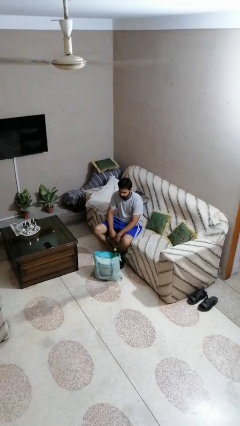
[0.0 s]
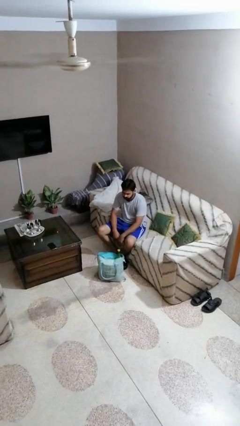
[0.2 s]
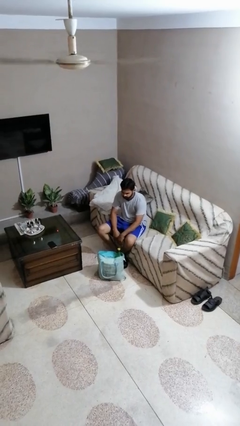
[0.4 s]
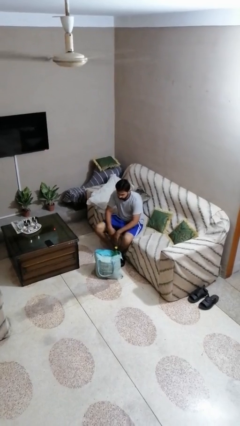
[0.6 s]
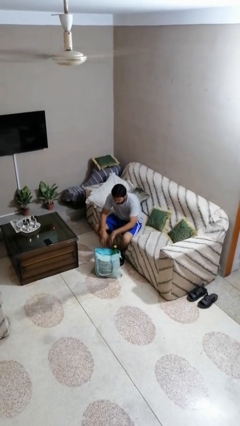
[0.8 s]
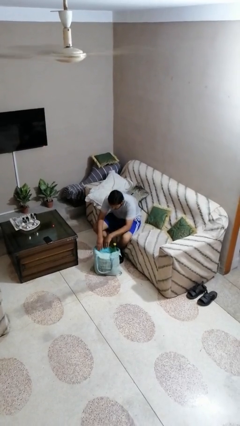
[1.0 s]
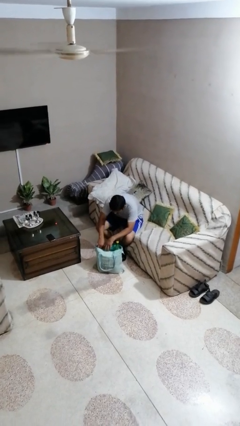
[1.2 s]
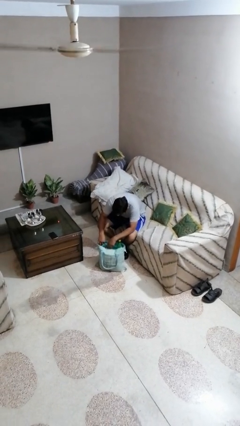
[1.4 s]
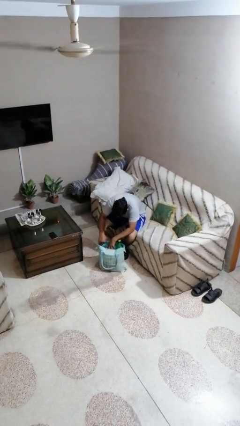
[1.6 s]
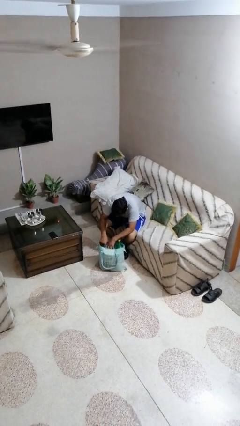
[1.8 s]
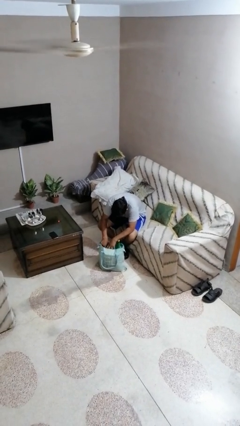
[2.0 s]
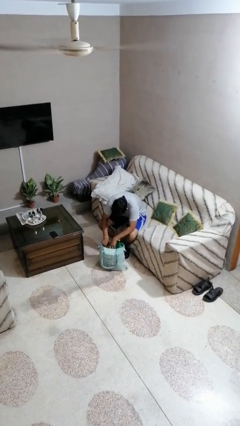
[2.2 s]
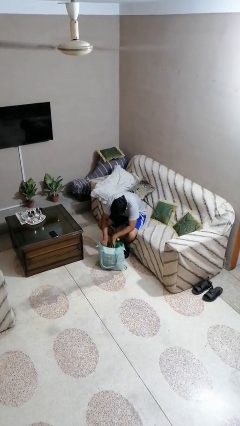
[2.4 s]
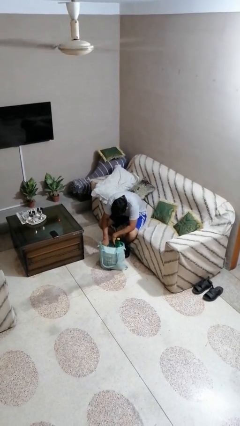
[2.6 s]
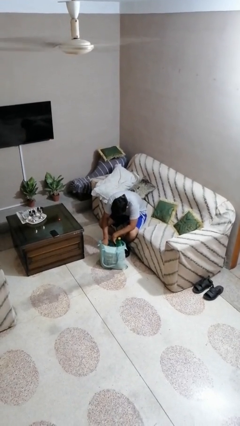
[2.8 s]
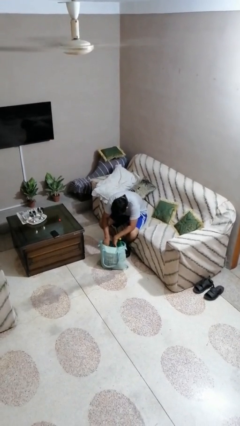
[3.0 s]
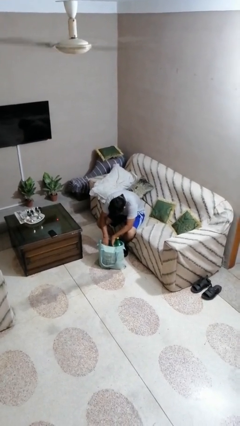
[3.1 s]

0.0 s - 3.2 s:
person searches in bag

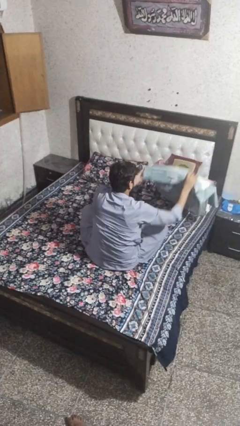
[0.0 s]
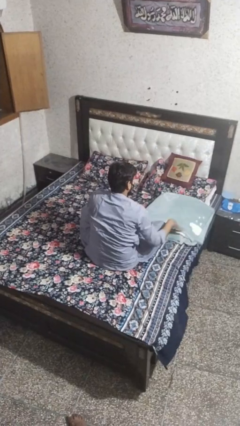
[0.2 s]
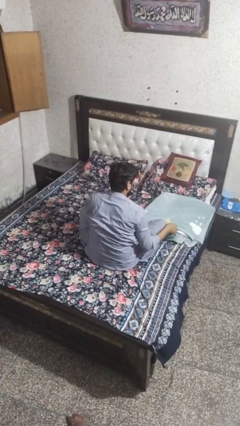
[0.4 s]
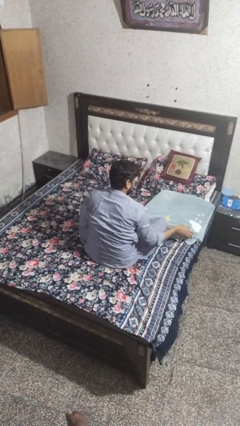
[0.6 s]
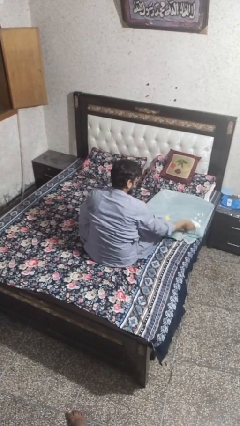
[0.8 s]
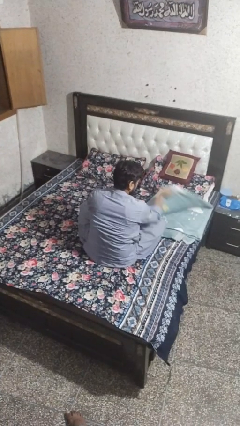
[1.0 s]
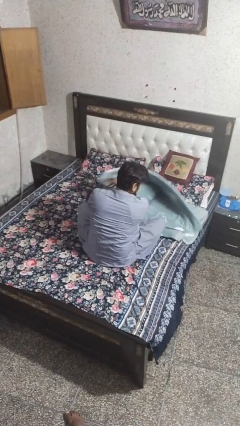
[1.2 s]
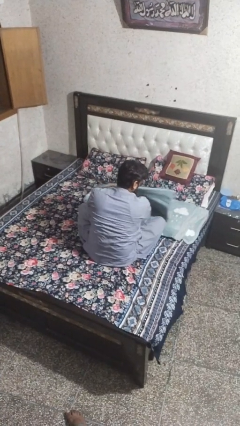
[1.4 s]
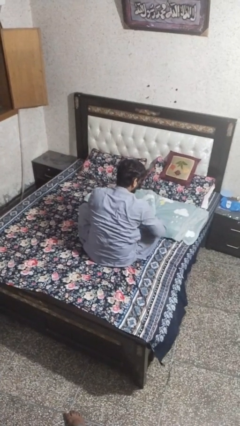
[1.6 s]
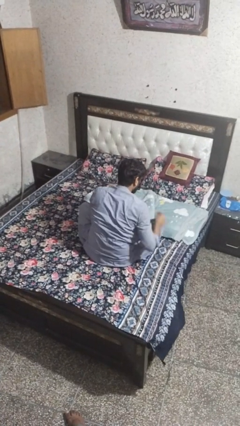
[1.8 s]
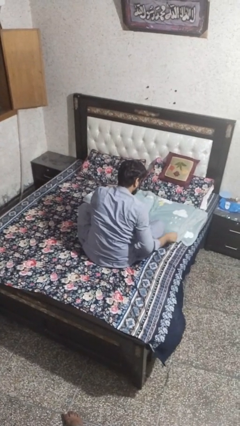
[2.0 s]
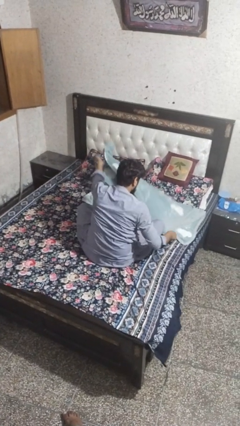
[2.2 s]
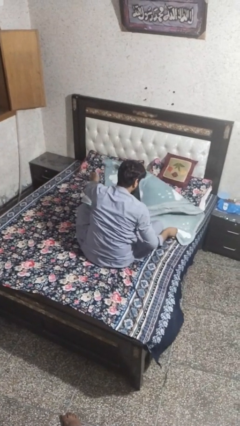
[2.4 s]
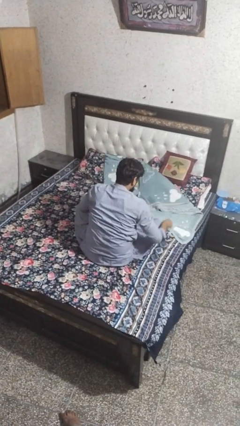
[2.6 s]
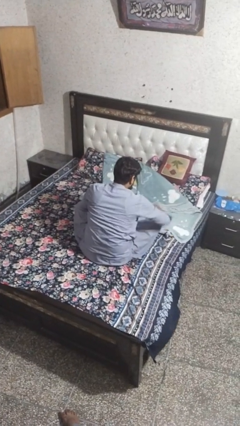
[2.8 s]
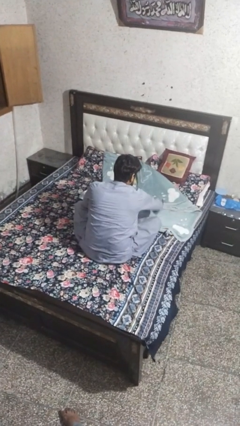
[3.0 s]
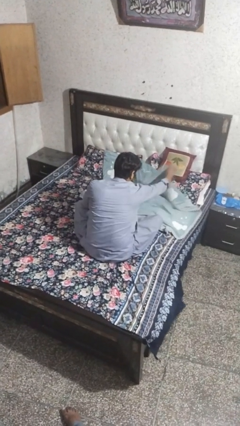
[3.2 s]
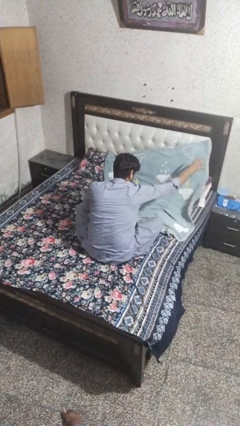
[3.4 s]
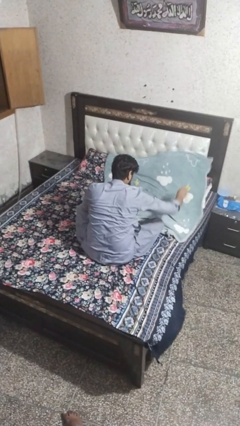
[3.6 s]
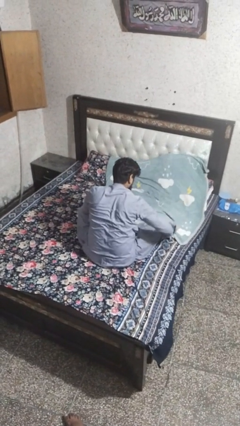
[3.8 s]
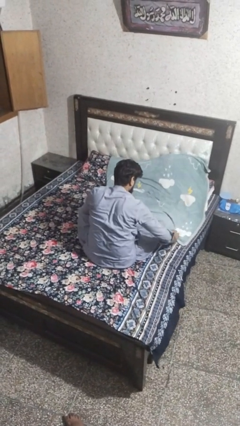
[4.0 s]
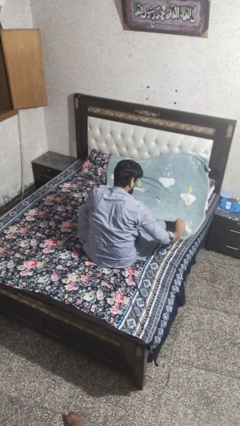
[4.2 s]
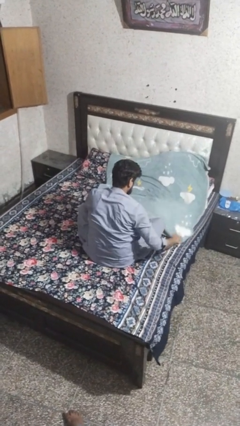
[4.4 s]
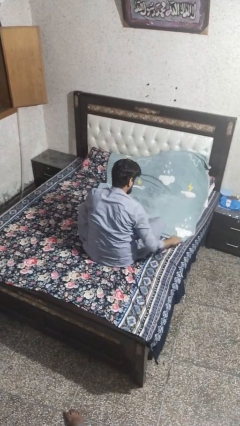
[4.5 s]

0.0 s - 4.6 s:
person unfolds blanket

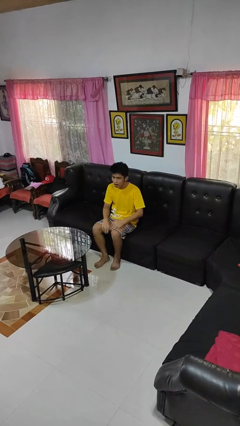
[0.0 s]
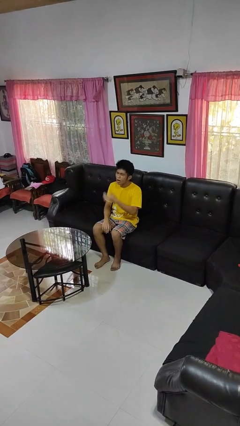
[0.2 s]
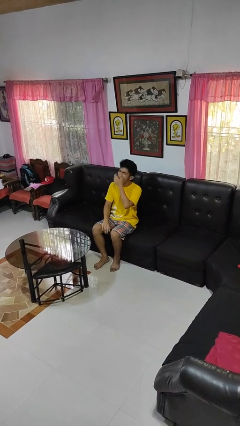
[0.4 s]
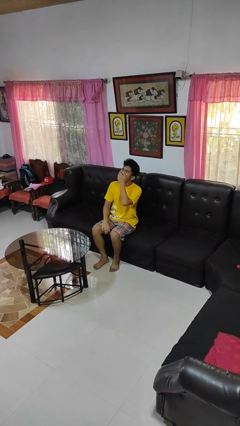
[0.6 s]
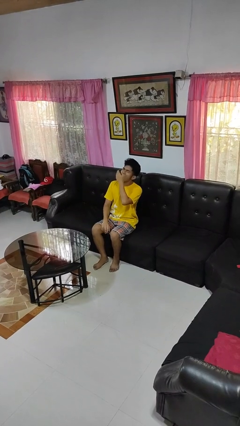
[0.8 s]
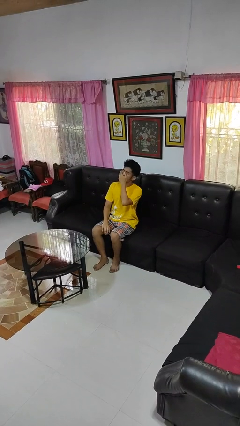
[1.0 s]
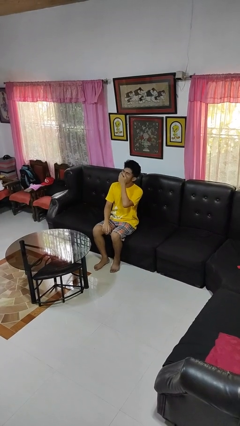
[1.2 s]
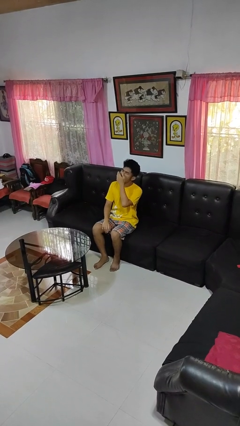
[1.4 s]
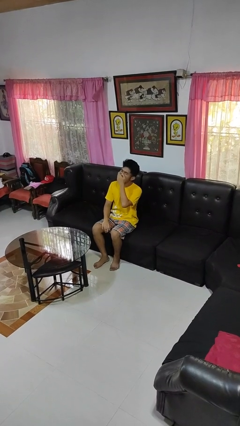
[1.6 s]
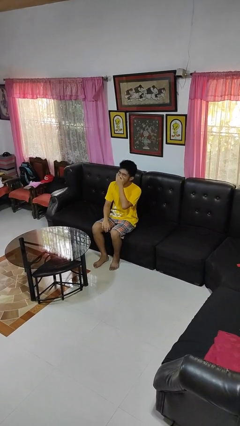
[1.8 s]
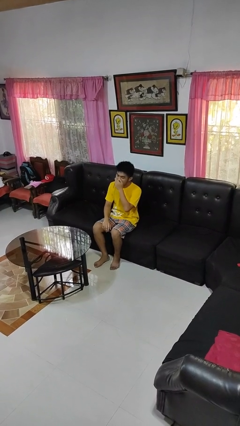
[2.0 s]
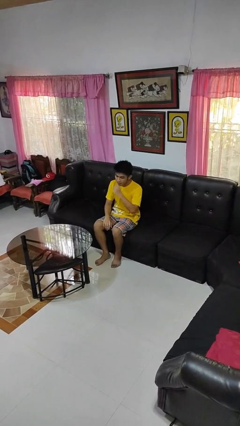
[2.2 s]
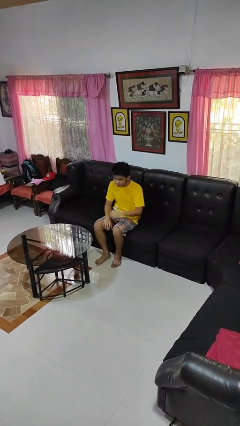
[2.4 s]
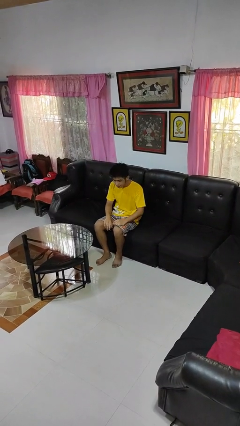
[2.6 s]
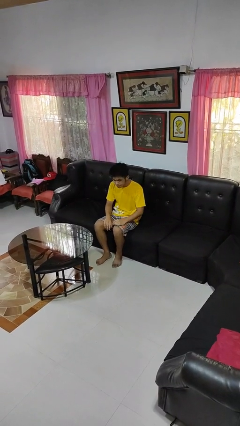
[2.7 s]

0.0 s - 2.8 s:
person yawns

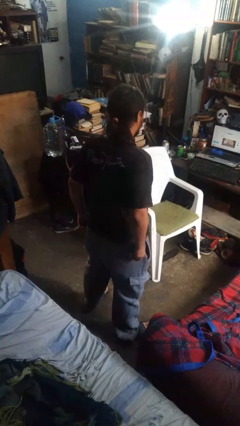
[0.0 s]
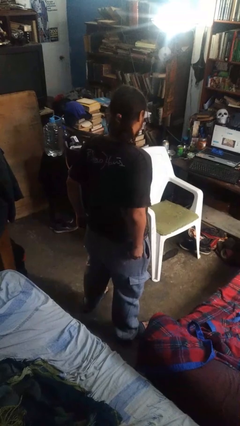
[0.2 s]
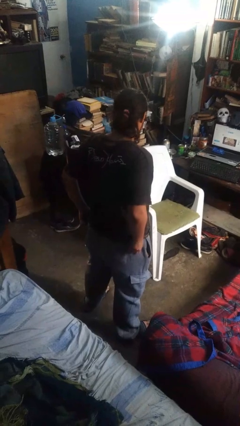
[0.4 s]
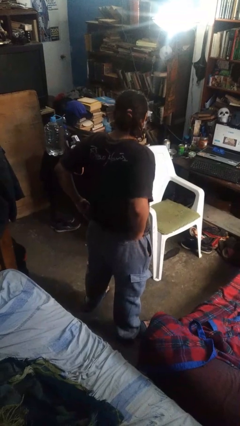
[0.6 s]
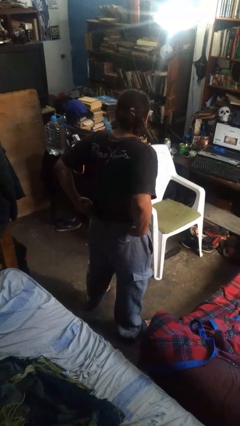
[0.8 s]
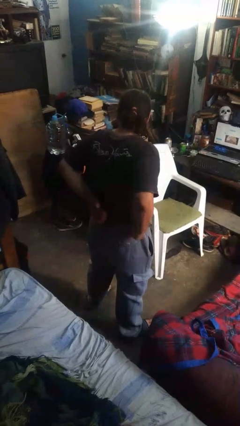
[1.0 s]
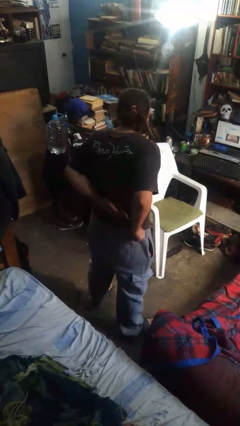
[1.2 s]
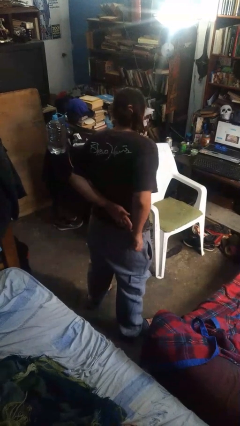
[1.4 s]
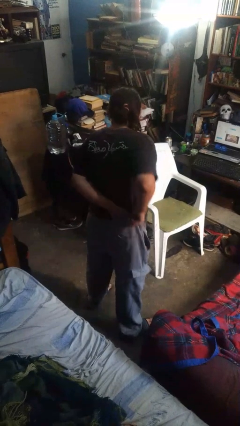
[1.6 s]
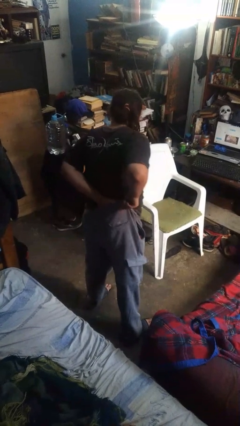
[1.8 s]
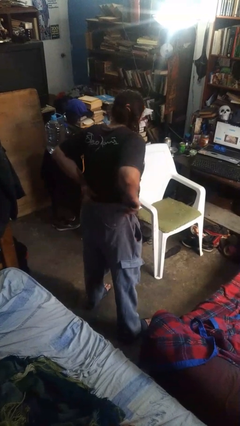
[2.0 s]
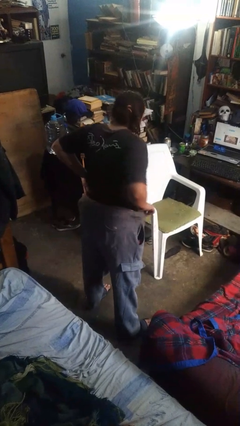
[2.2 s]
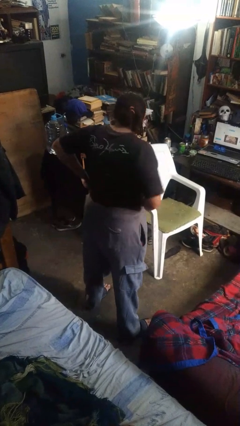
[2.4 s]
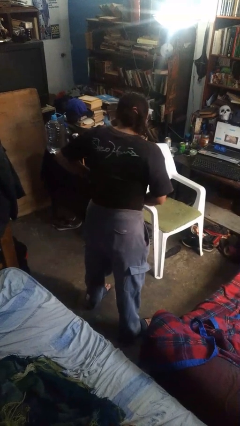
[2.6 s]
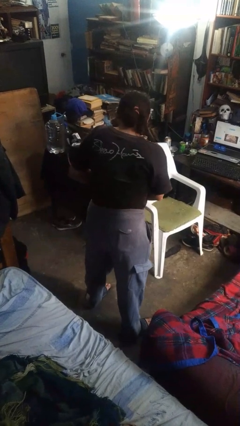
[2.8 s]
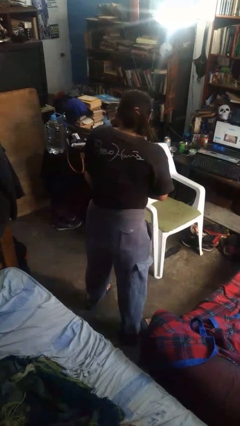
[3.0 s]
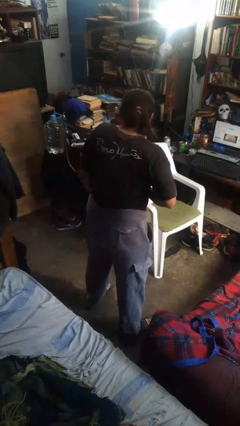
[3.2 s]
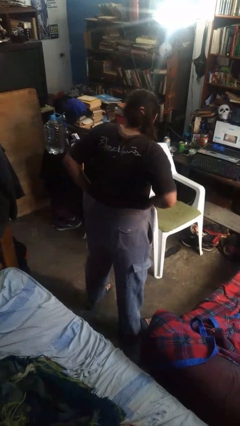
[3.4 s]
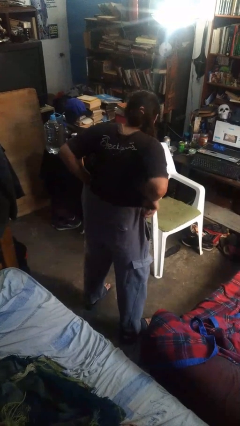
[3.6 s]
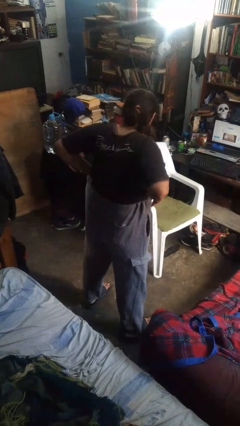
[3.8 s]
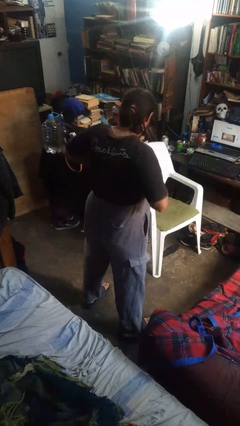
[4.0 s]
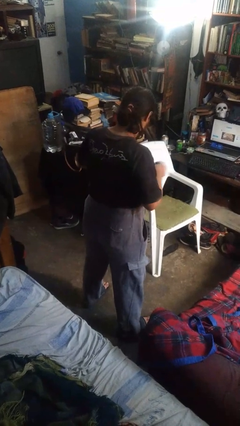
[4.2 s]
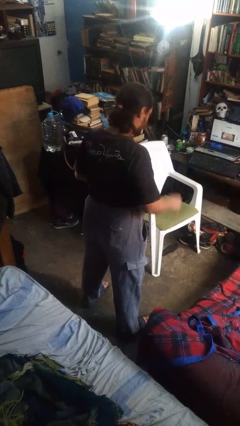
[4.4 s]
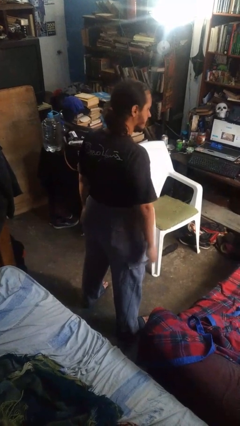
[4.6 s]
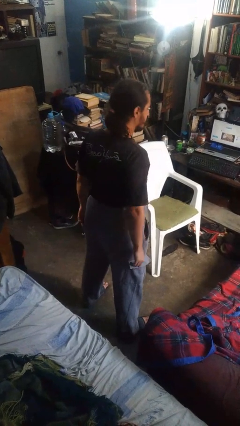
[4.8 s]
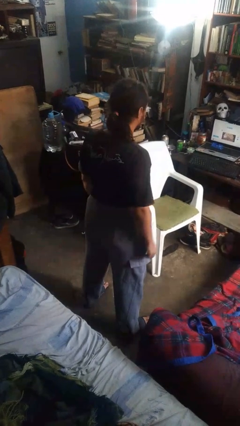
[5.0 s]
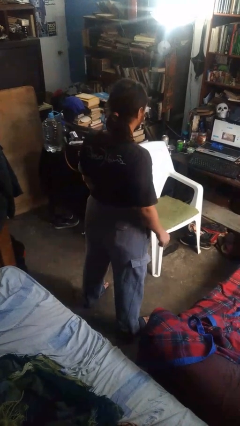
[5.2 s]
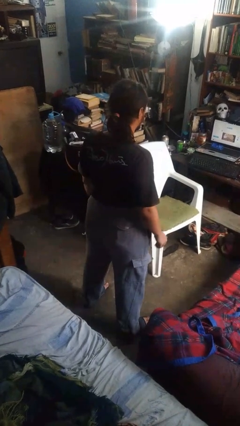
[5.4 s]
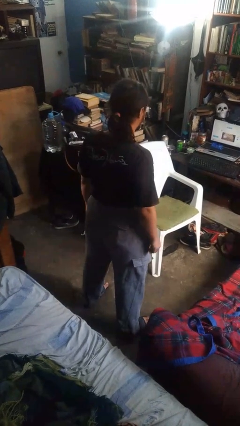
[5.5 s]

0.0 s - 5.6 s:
person tucks in shirt

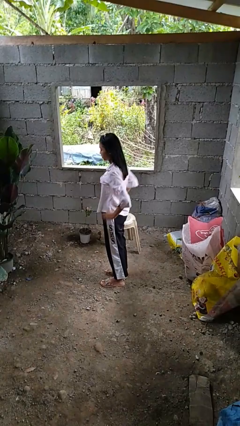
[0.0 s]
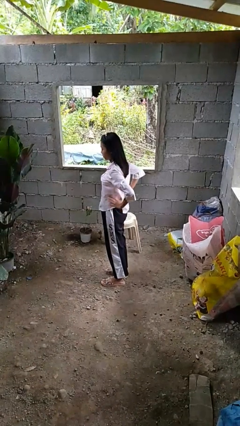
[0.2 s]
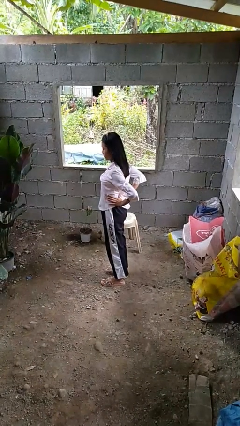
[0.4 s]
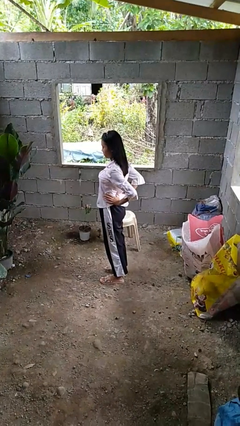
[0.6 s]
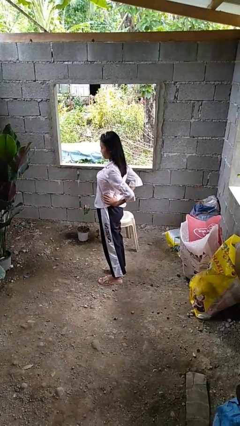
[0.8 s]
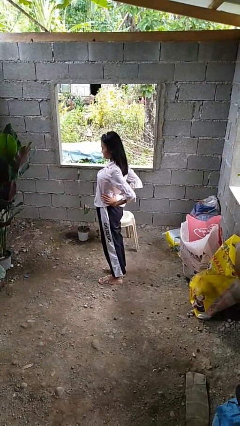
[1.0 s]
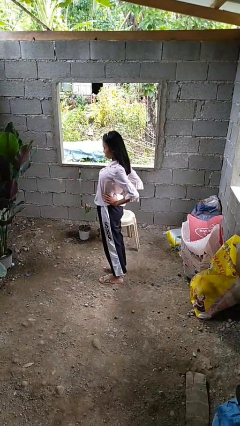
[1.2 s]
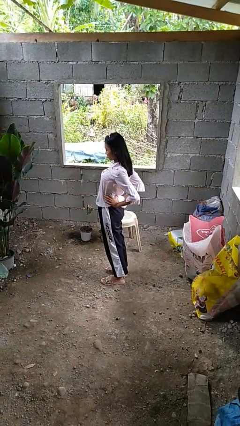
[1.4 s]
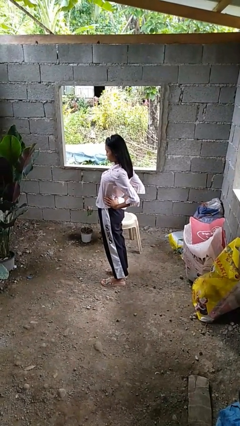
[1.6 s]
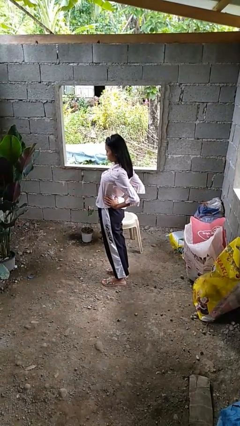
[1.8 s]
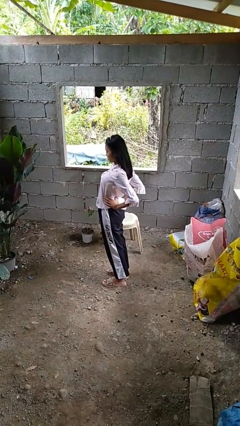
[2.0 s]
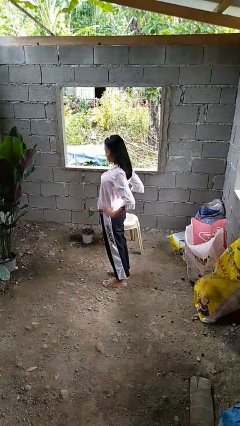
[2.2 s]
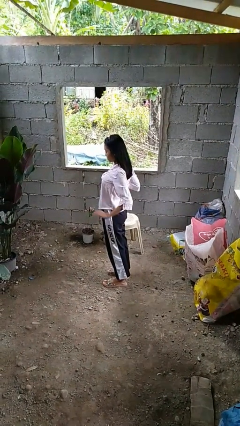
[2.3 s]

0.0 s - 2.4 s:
person stretches back
